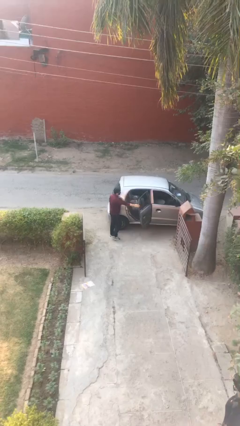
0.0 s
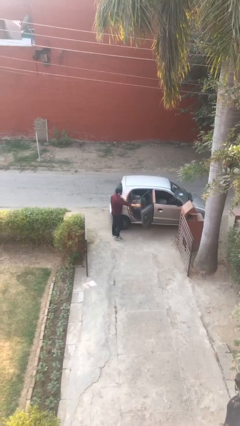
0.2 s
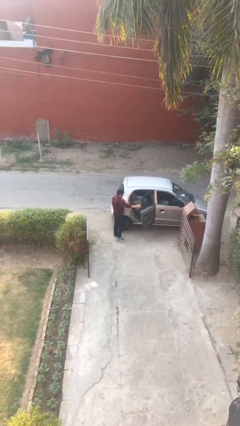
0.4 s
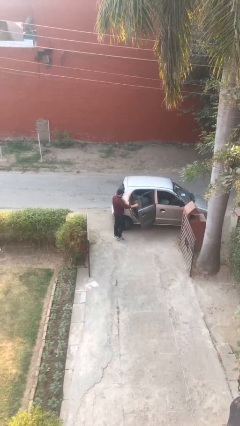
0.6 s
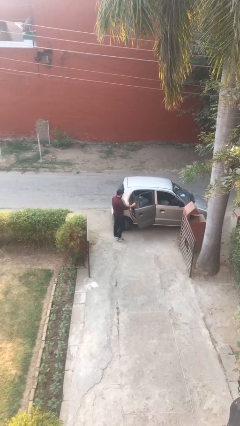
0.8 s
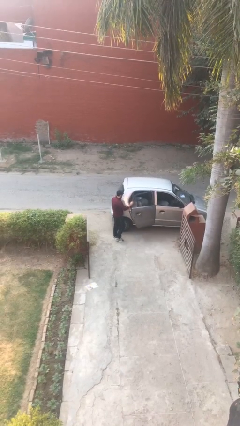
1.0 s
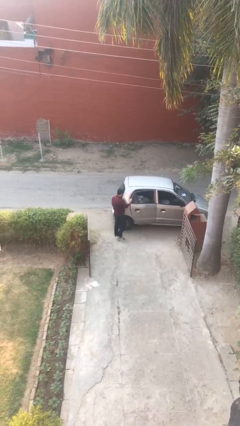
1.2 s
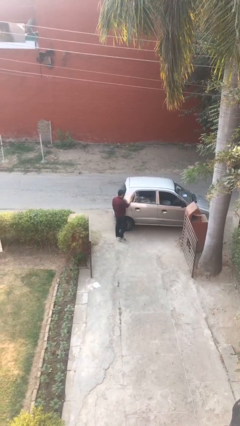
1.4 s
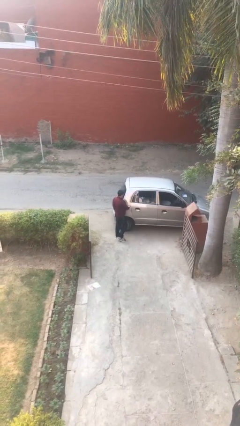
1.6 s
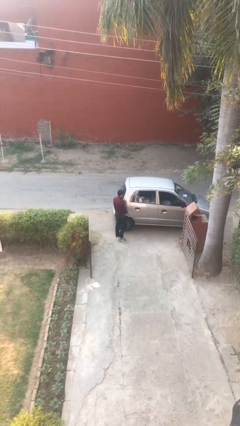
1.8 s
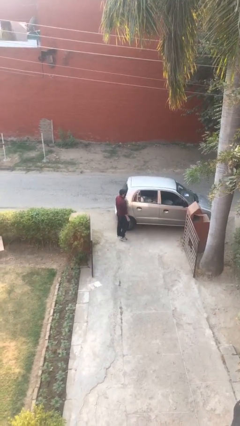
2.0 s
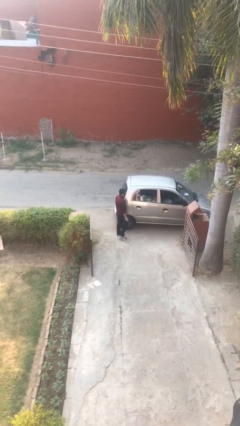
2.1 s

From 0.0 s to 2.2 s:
person closes car door

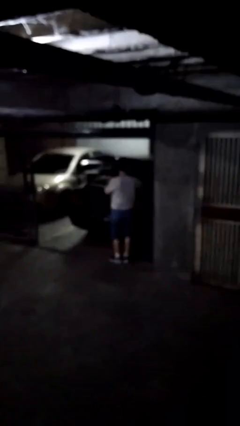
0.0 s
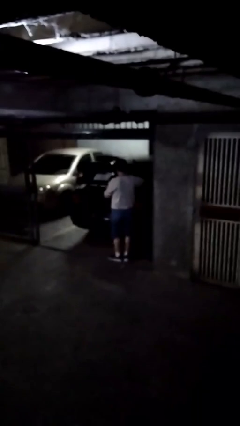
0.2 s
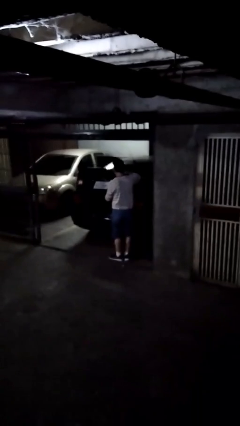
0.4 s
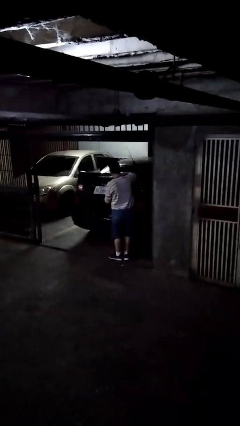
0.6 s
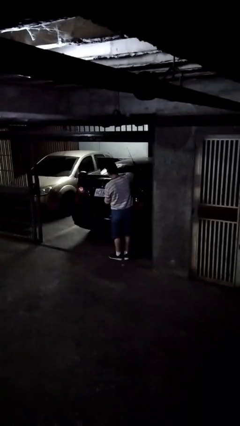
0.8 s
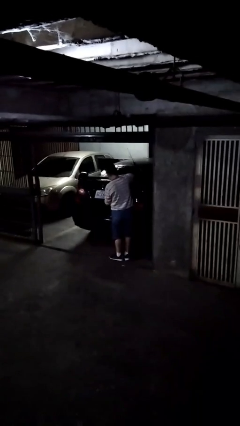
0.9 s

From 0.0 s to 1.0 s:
person closes car trunk

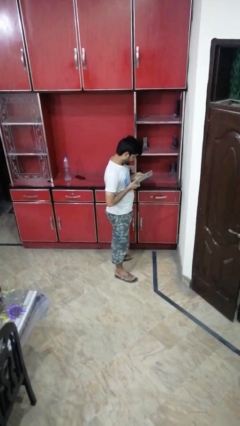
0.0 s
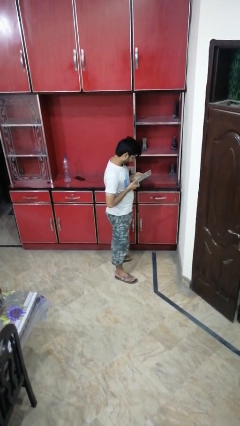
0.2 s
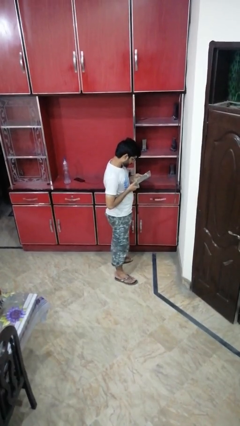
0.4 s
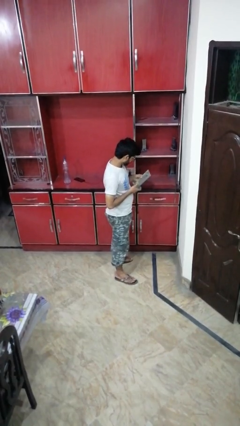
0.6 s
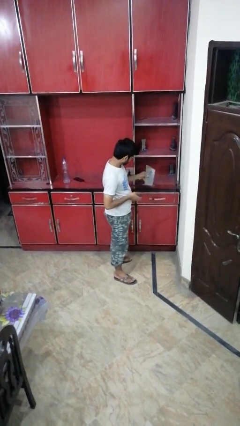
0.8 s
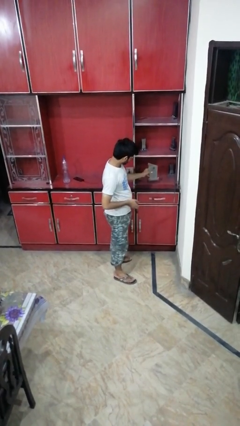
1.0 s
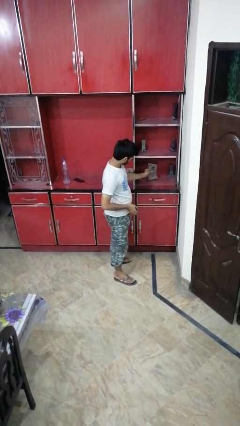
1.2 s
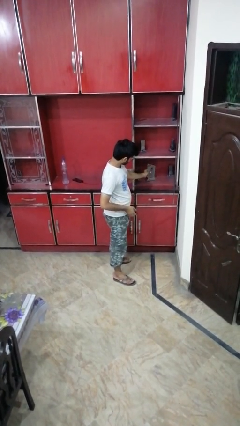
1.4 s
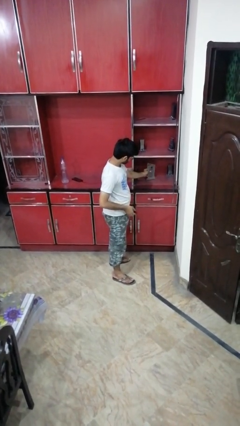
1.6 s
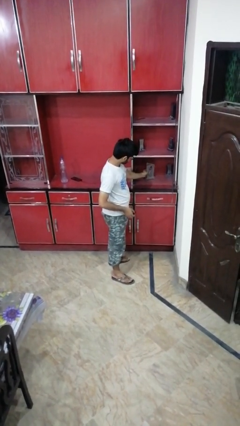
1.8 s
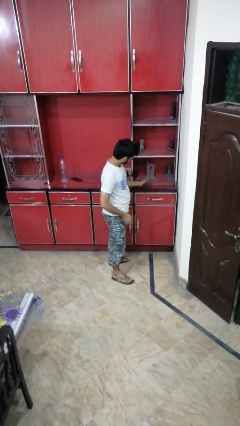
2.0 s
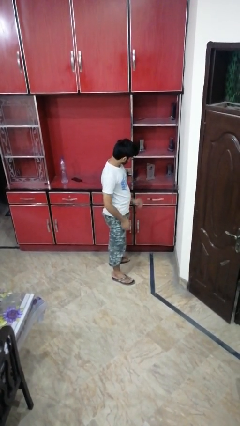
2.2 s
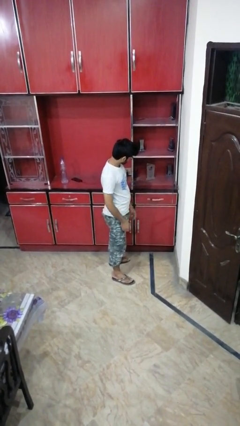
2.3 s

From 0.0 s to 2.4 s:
person puts down object into cabinet

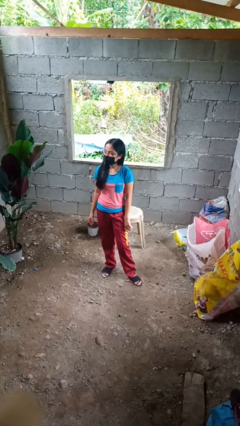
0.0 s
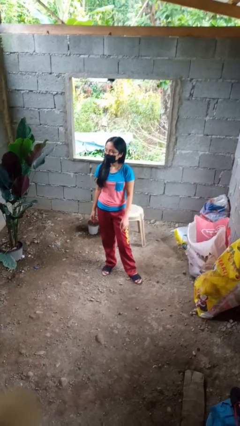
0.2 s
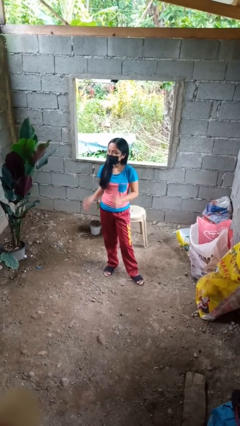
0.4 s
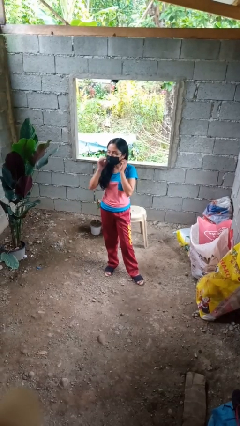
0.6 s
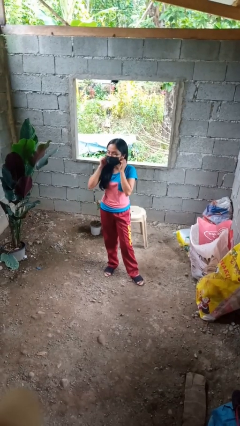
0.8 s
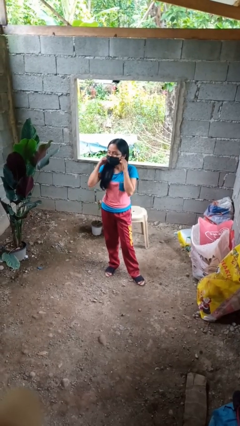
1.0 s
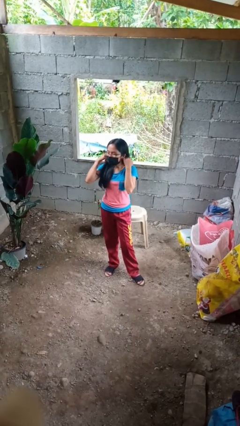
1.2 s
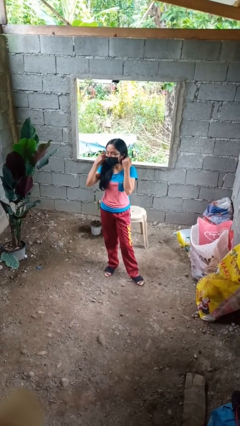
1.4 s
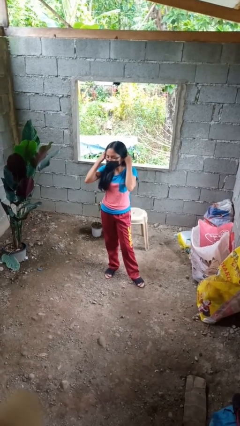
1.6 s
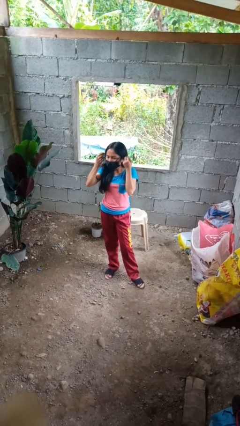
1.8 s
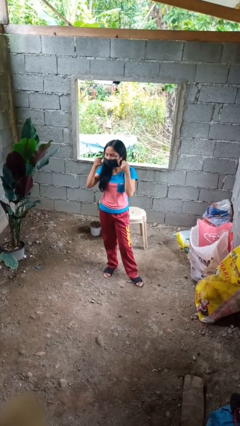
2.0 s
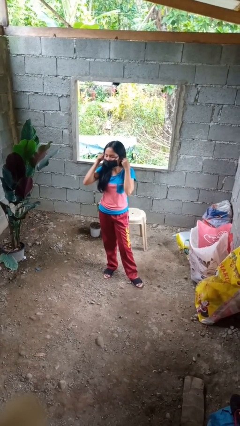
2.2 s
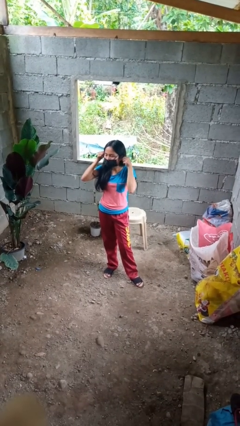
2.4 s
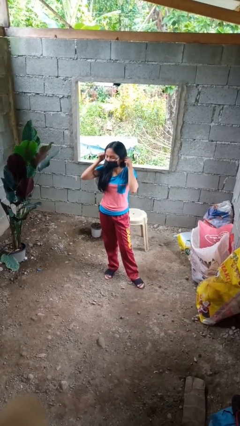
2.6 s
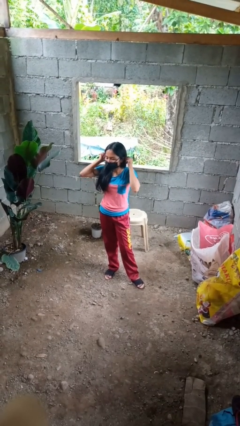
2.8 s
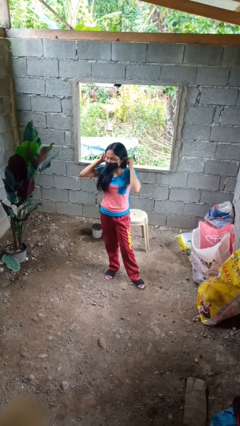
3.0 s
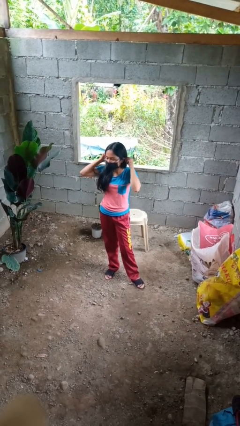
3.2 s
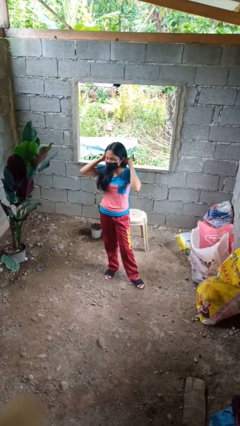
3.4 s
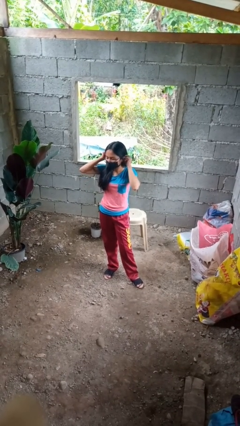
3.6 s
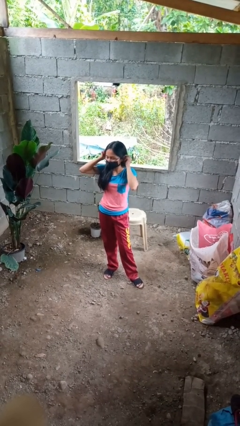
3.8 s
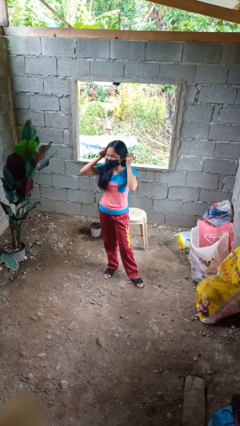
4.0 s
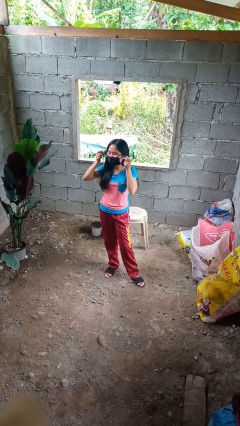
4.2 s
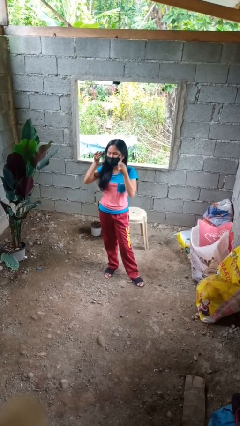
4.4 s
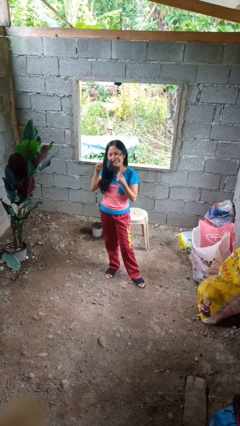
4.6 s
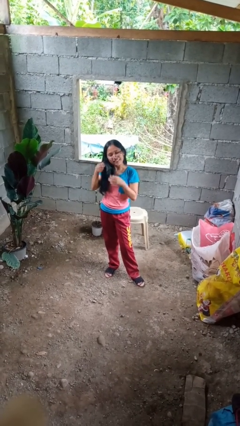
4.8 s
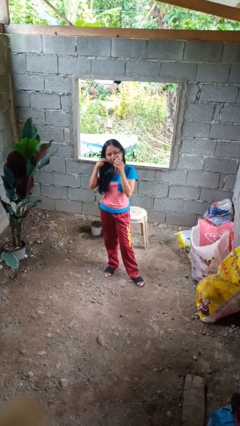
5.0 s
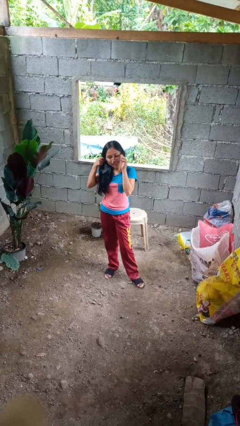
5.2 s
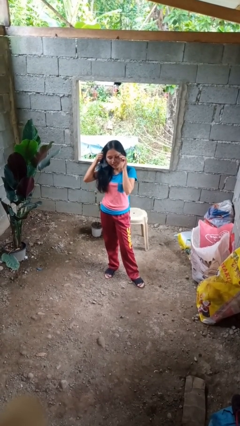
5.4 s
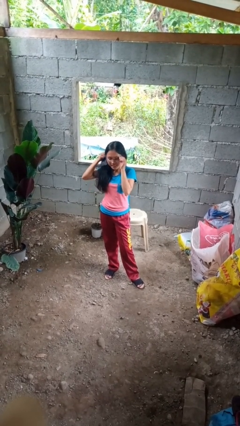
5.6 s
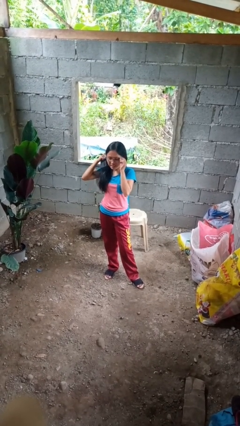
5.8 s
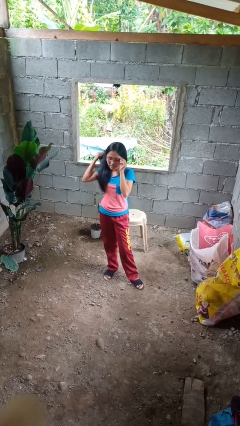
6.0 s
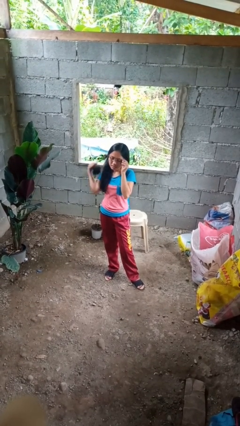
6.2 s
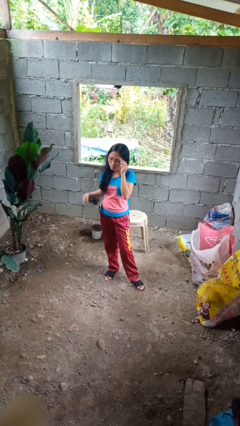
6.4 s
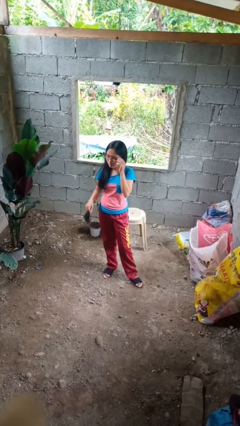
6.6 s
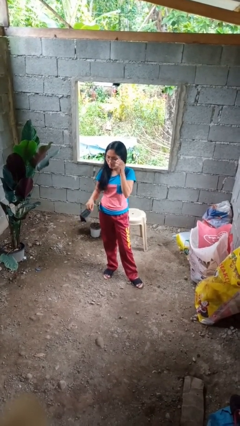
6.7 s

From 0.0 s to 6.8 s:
person takes off facemask

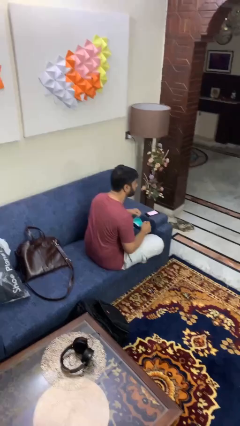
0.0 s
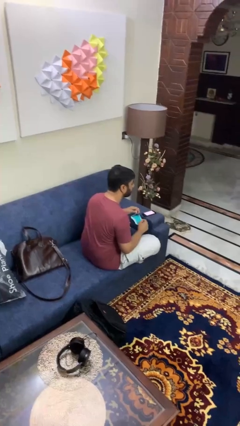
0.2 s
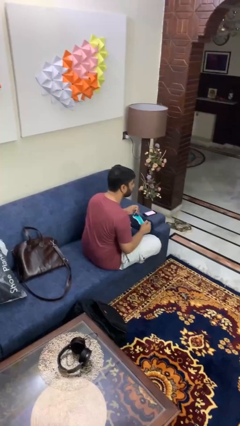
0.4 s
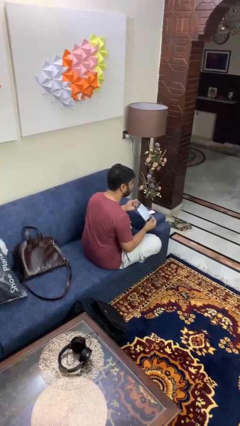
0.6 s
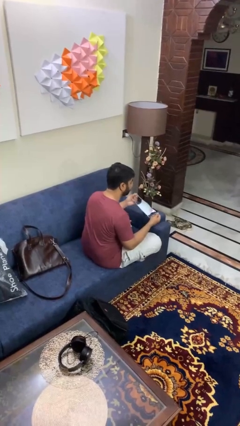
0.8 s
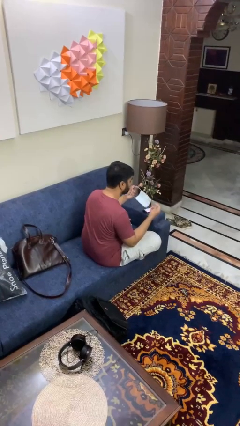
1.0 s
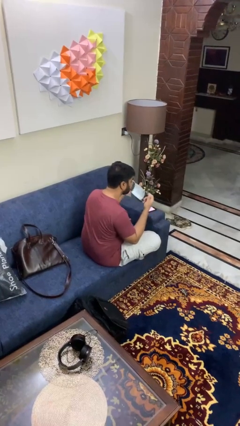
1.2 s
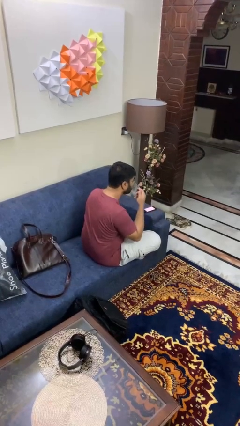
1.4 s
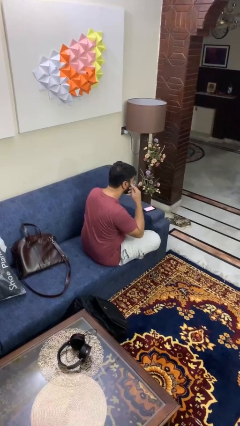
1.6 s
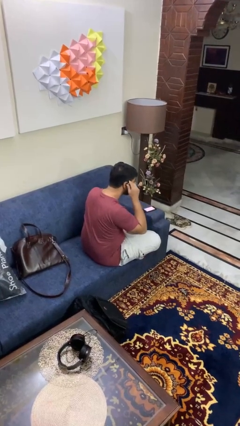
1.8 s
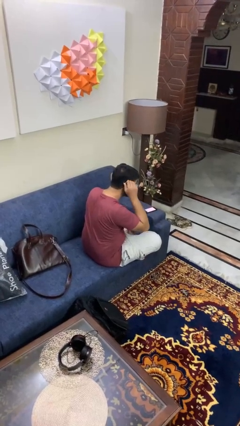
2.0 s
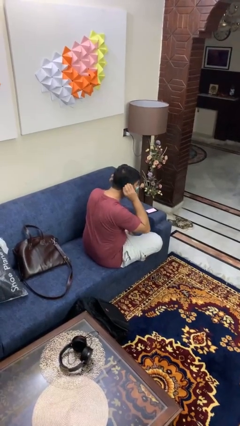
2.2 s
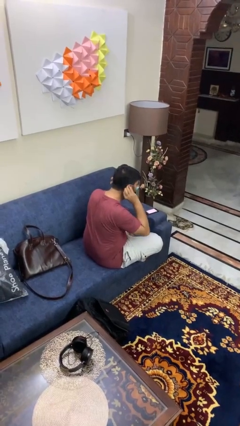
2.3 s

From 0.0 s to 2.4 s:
person puts on facemask

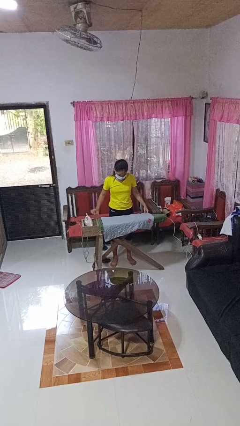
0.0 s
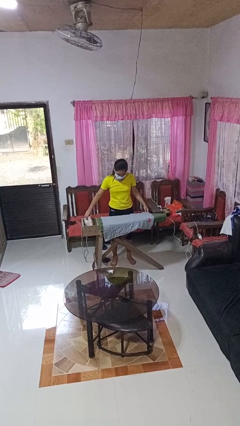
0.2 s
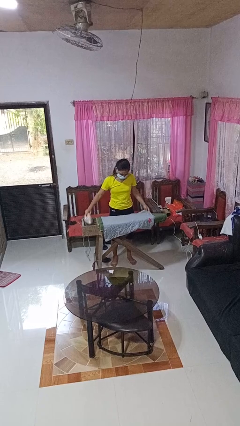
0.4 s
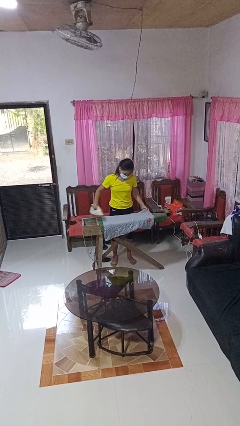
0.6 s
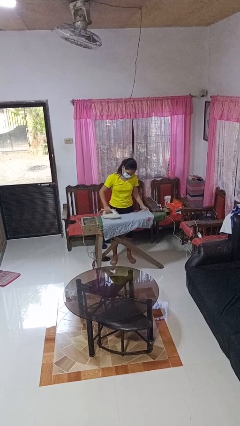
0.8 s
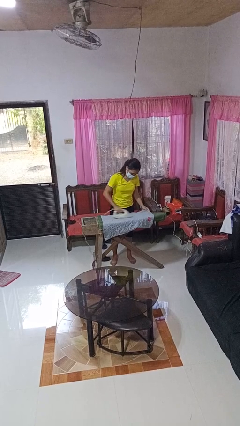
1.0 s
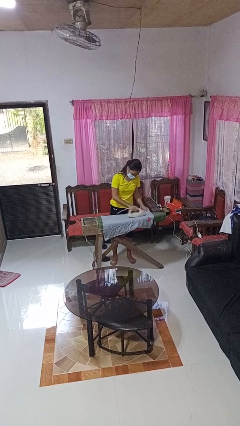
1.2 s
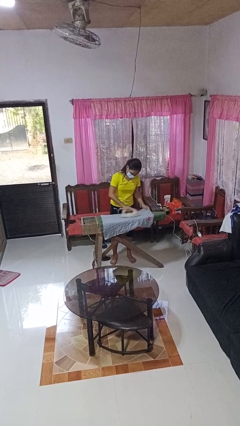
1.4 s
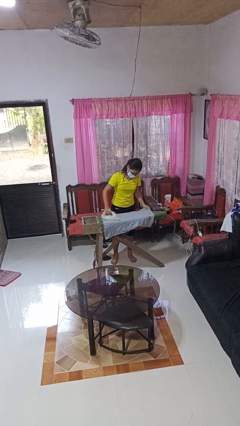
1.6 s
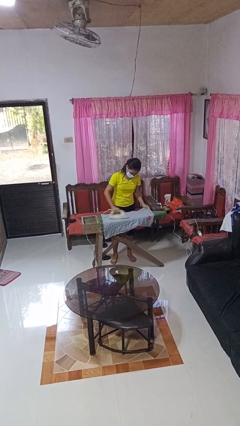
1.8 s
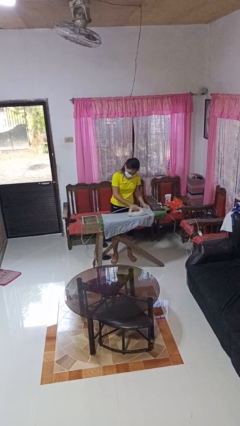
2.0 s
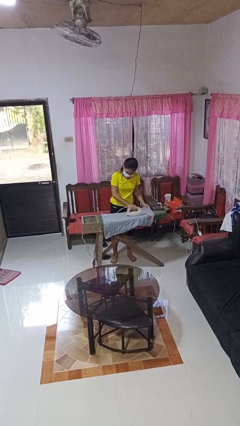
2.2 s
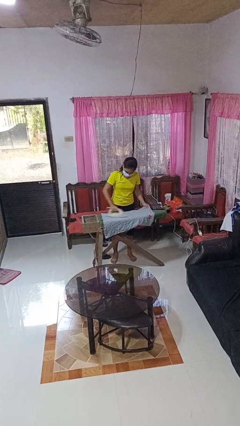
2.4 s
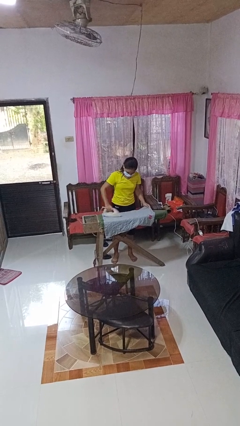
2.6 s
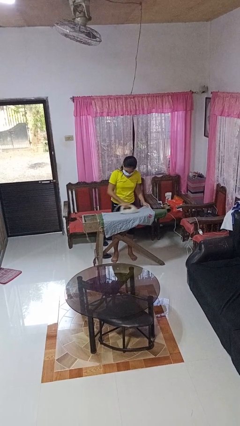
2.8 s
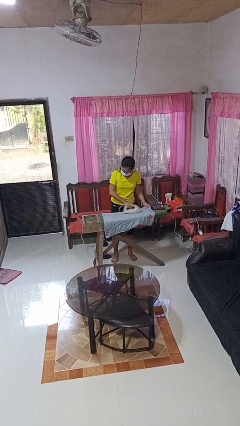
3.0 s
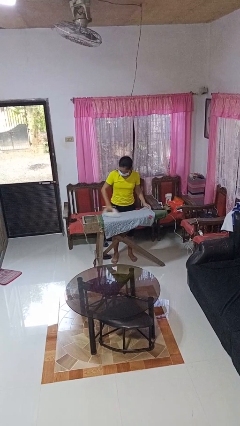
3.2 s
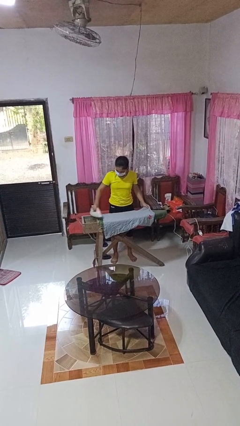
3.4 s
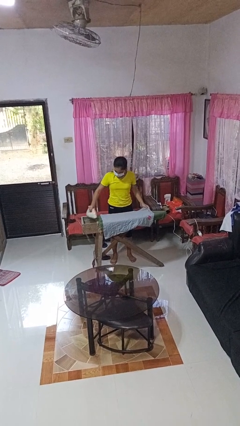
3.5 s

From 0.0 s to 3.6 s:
person irons clothes
